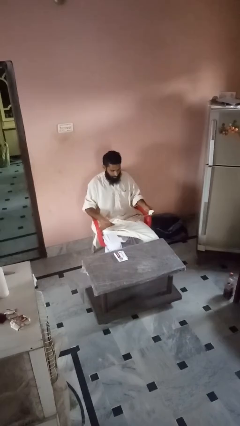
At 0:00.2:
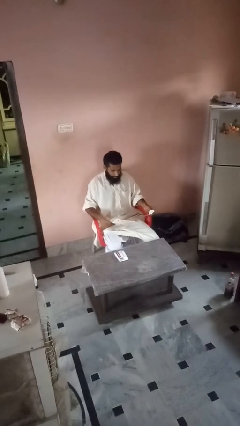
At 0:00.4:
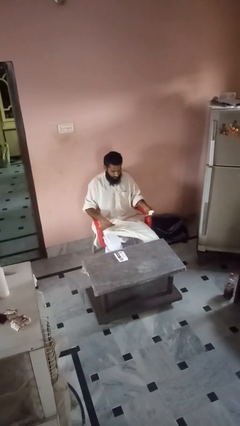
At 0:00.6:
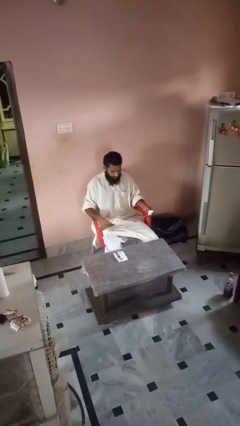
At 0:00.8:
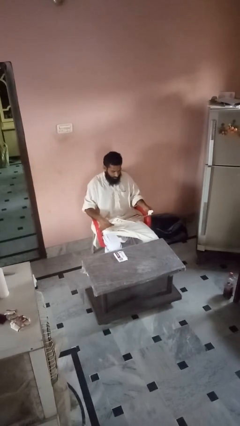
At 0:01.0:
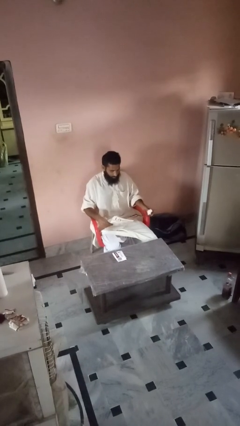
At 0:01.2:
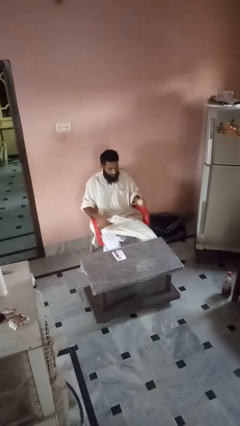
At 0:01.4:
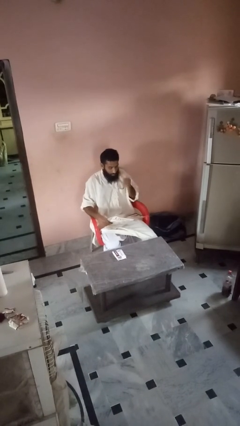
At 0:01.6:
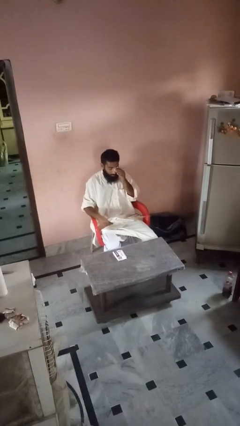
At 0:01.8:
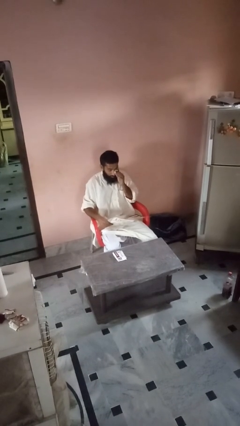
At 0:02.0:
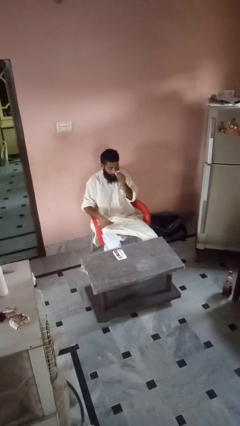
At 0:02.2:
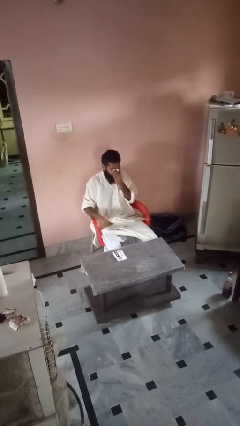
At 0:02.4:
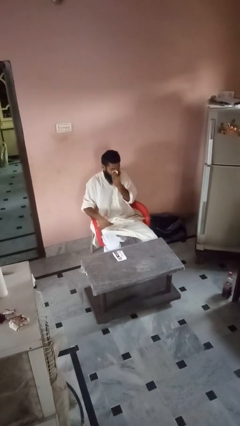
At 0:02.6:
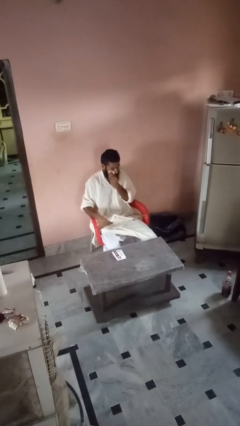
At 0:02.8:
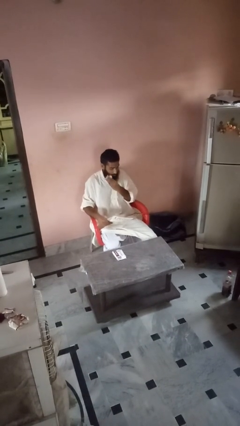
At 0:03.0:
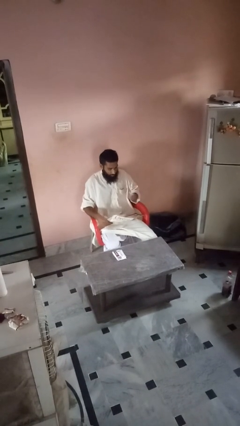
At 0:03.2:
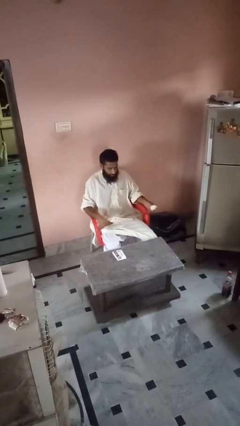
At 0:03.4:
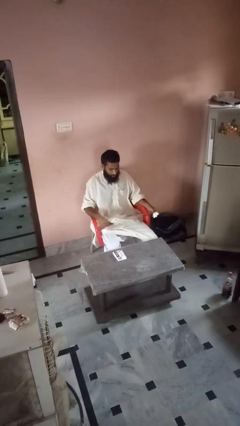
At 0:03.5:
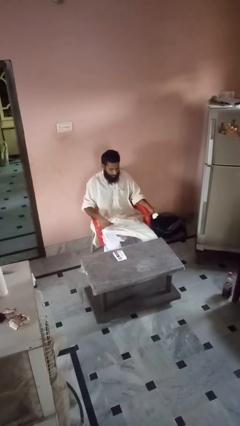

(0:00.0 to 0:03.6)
person tears paper

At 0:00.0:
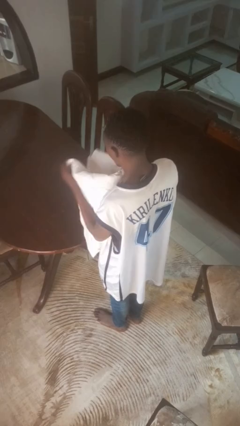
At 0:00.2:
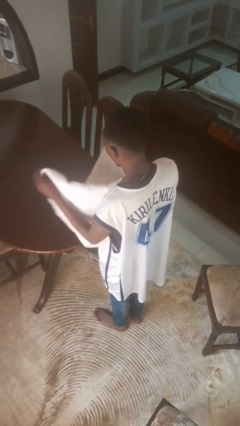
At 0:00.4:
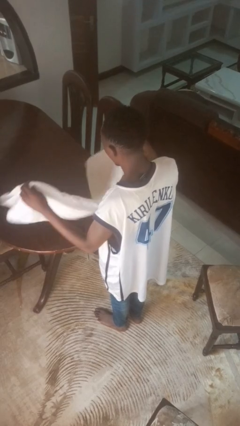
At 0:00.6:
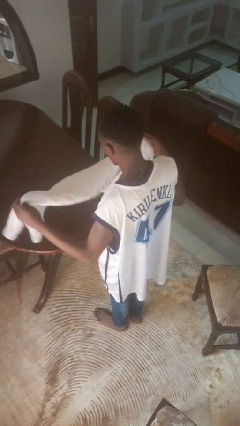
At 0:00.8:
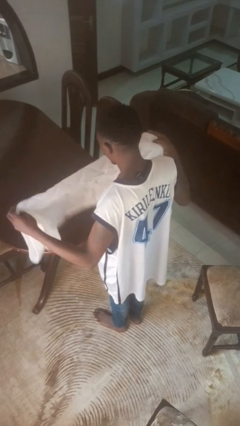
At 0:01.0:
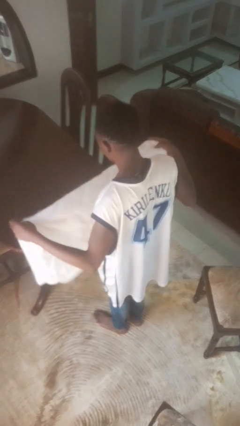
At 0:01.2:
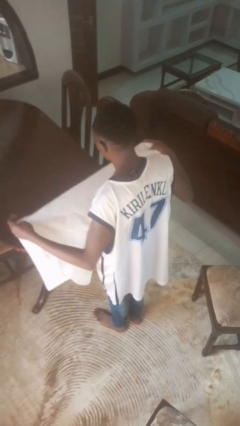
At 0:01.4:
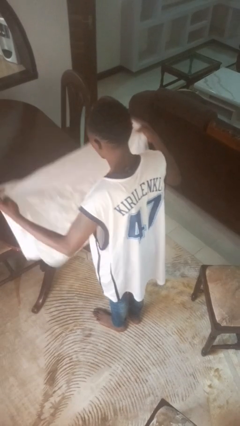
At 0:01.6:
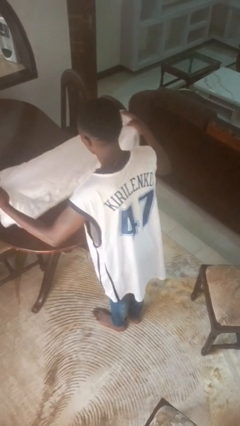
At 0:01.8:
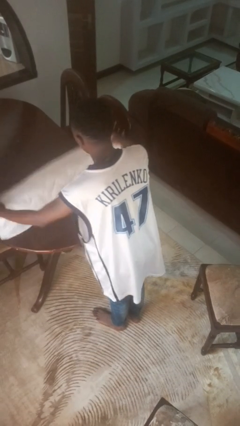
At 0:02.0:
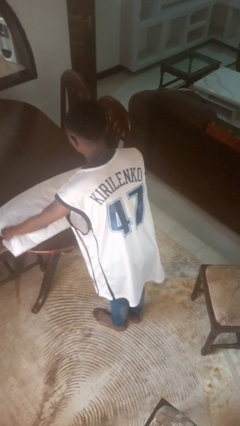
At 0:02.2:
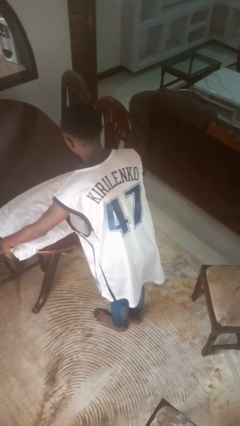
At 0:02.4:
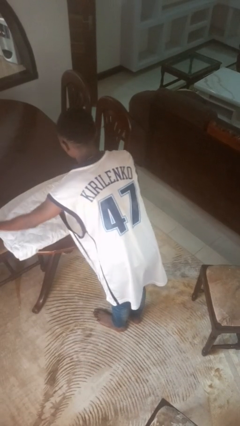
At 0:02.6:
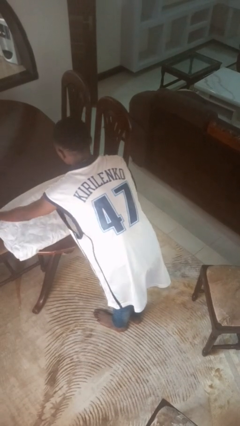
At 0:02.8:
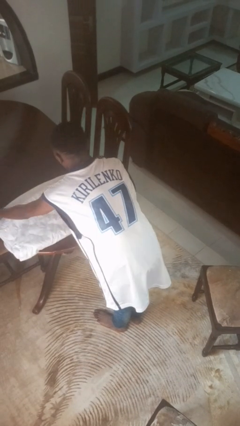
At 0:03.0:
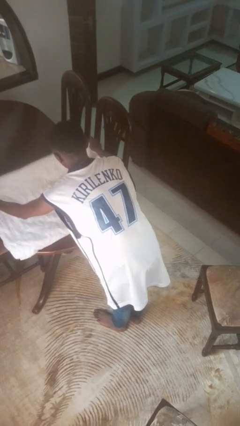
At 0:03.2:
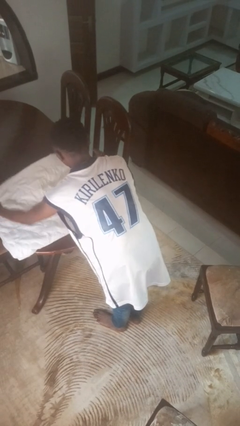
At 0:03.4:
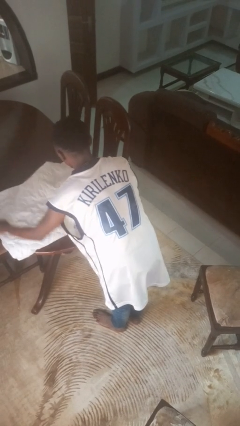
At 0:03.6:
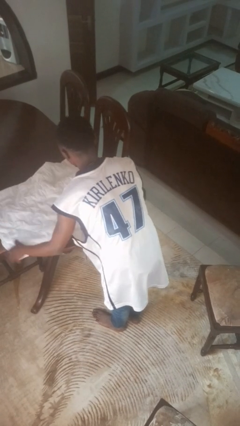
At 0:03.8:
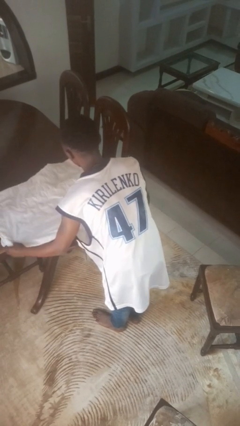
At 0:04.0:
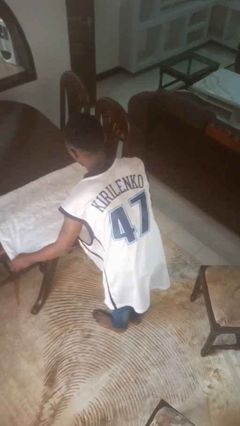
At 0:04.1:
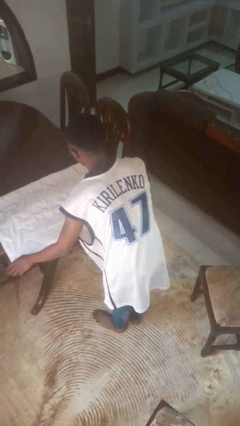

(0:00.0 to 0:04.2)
person spreads tablecloth

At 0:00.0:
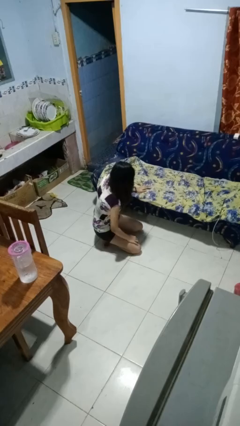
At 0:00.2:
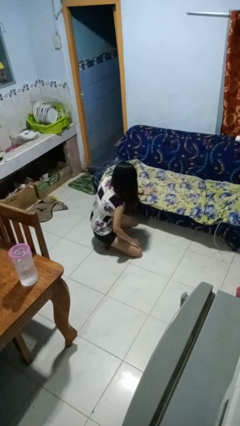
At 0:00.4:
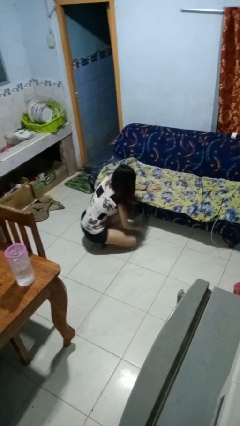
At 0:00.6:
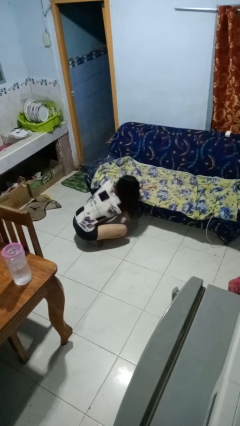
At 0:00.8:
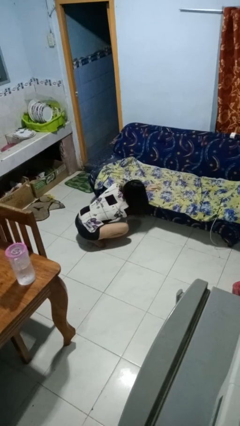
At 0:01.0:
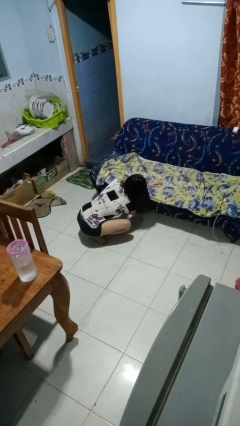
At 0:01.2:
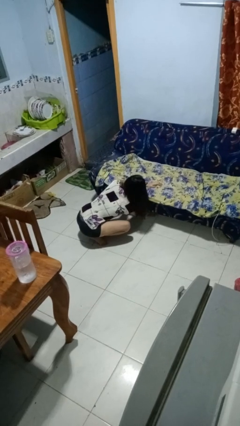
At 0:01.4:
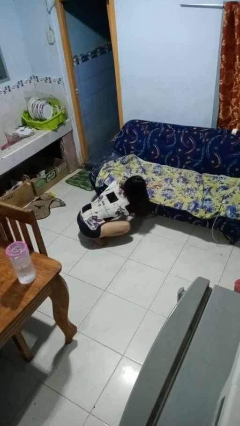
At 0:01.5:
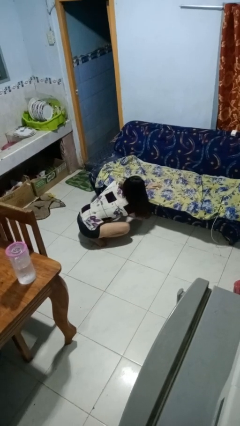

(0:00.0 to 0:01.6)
person searches under couch

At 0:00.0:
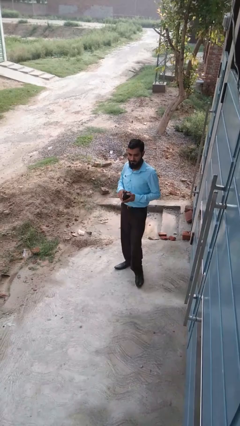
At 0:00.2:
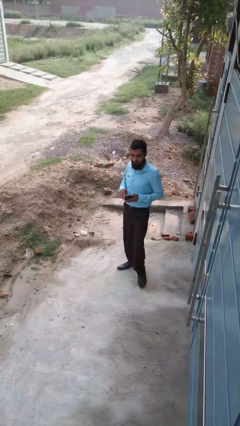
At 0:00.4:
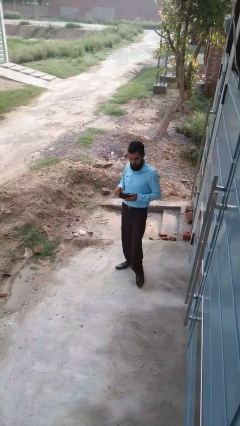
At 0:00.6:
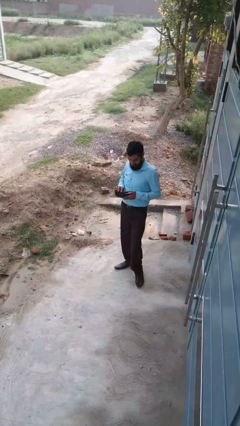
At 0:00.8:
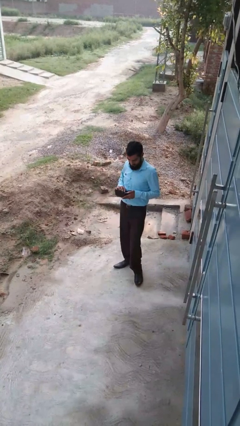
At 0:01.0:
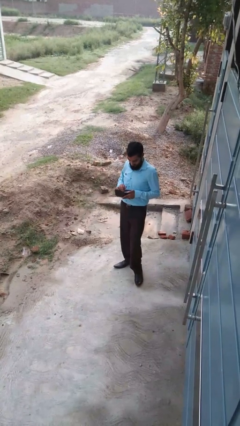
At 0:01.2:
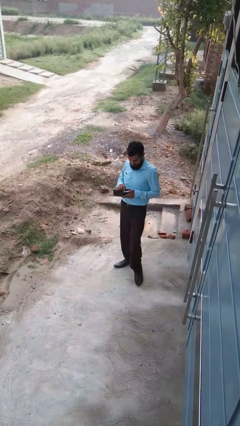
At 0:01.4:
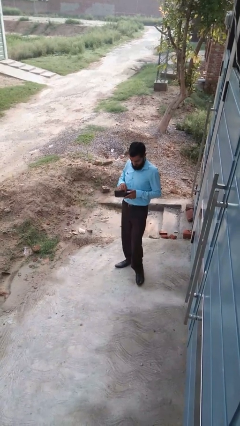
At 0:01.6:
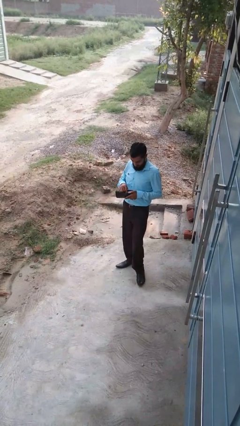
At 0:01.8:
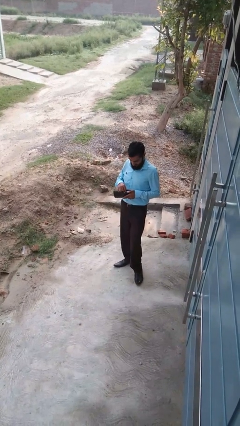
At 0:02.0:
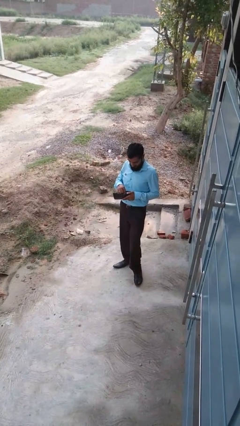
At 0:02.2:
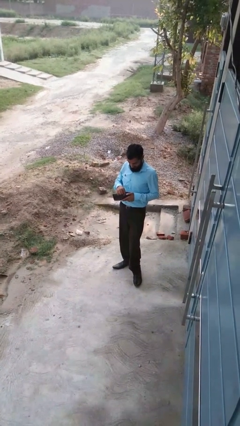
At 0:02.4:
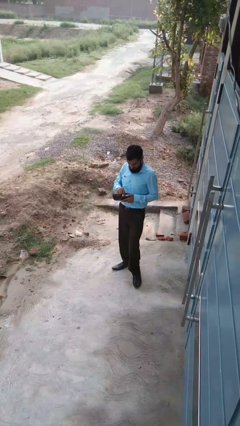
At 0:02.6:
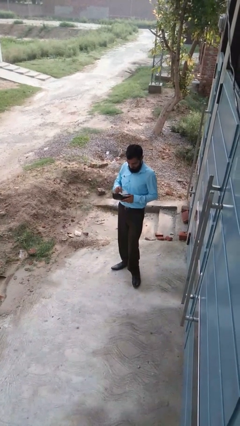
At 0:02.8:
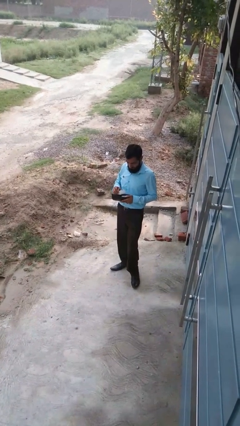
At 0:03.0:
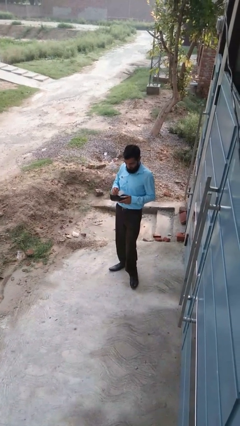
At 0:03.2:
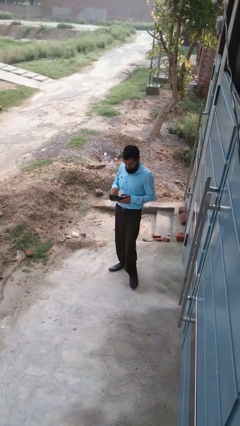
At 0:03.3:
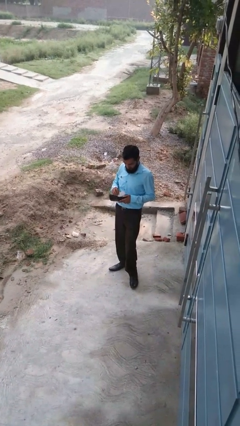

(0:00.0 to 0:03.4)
person searches in purse

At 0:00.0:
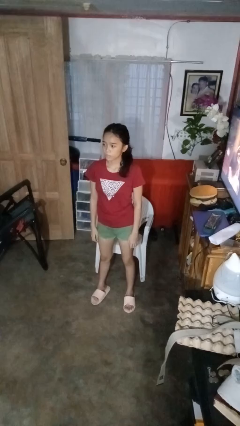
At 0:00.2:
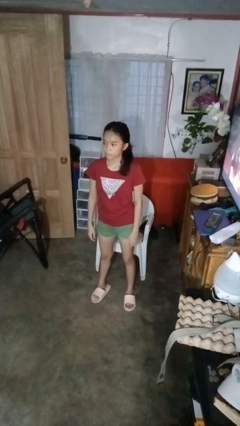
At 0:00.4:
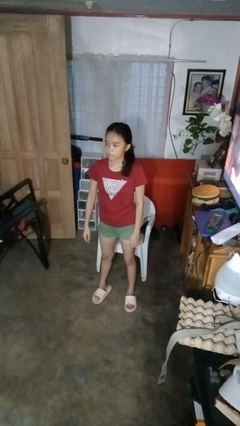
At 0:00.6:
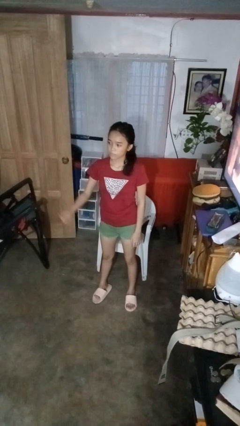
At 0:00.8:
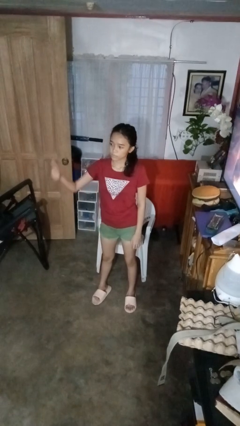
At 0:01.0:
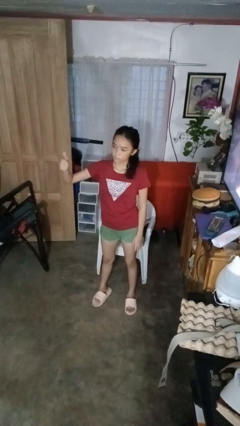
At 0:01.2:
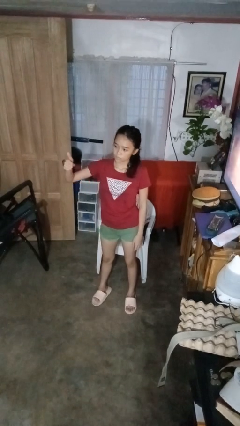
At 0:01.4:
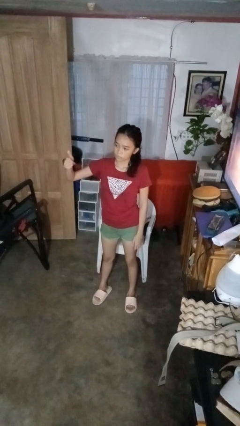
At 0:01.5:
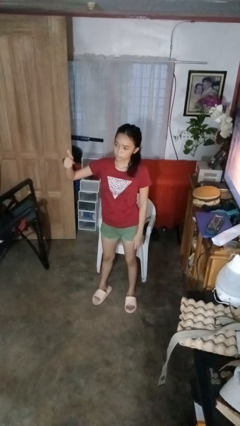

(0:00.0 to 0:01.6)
person gestures thumbs up

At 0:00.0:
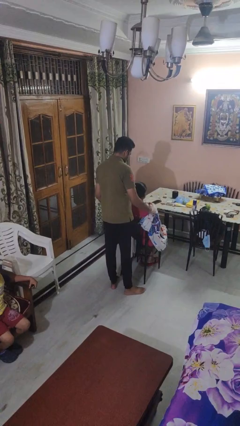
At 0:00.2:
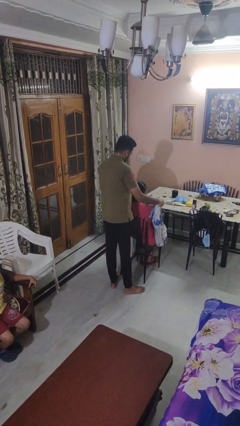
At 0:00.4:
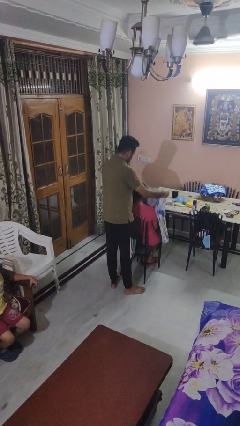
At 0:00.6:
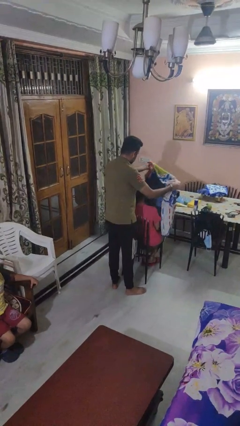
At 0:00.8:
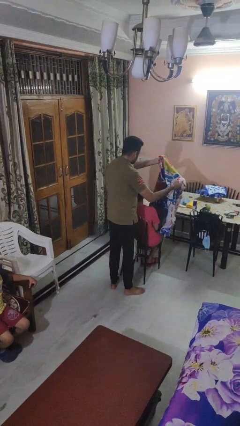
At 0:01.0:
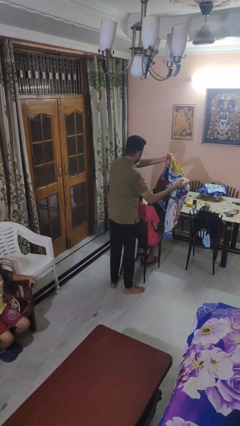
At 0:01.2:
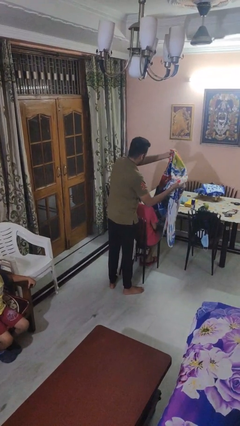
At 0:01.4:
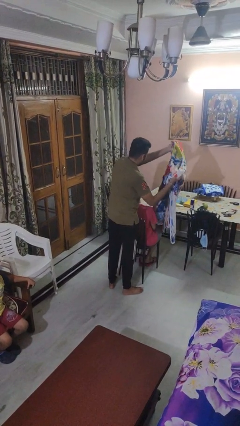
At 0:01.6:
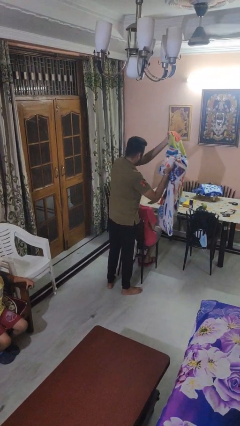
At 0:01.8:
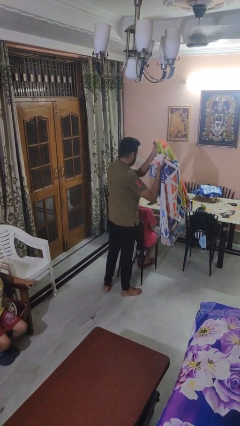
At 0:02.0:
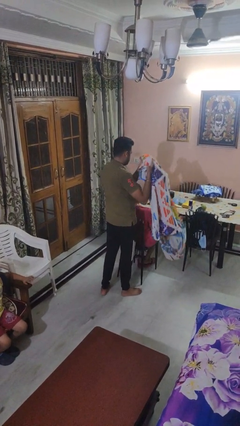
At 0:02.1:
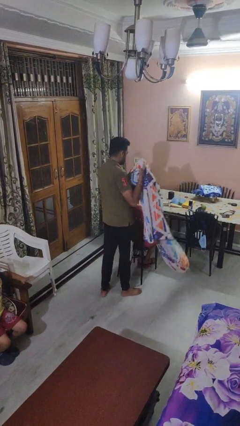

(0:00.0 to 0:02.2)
person uncovers friend with blanket

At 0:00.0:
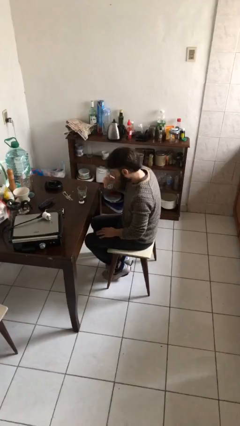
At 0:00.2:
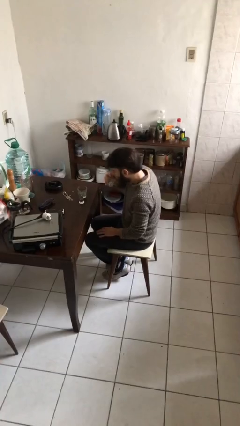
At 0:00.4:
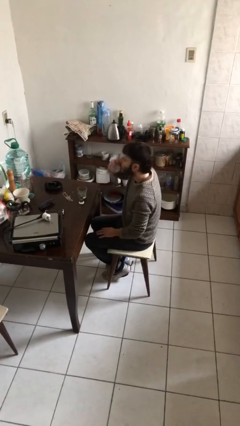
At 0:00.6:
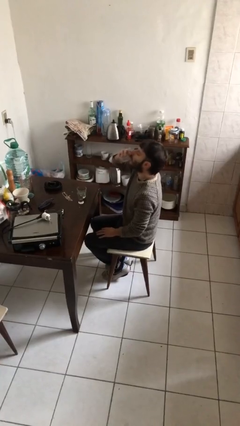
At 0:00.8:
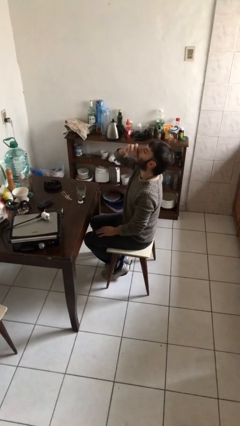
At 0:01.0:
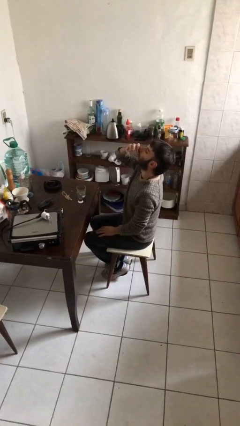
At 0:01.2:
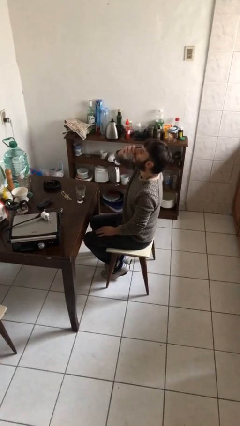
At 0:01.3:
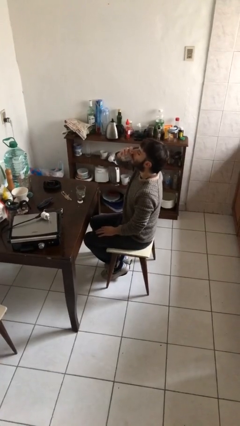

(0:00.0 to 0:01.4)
person drinks from shotglass
